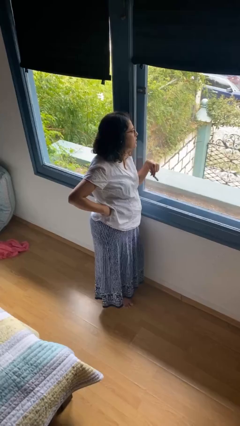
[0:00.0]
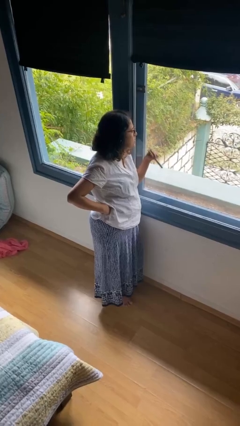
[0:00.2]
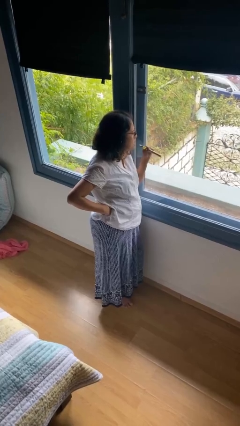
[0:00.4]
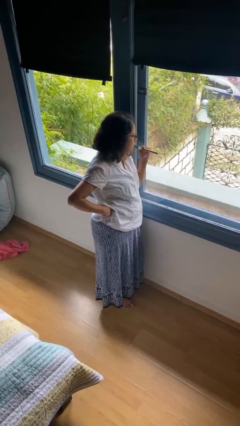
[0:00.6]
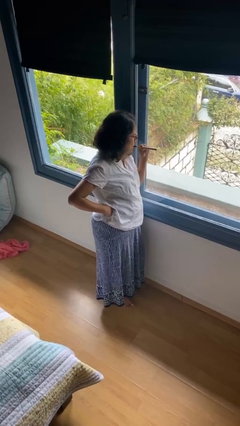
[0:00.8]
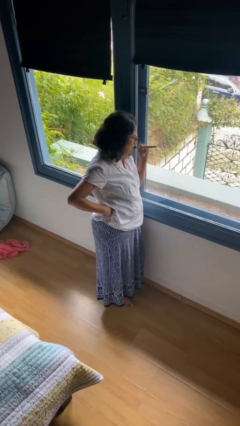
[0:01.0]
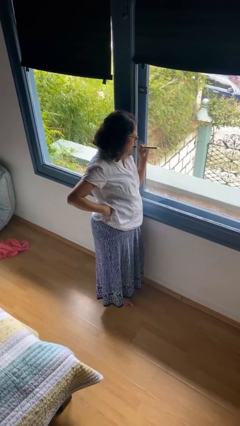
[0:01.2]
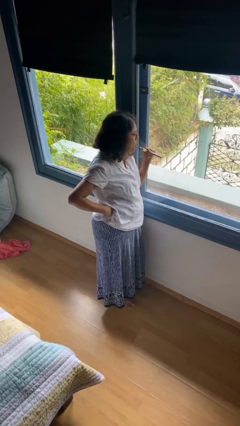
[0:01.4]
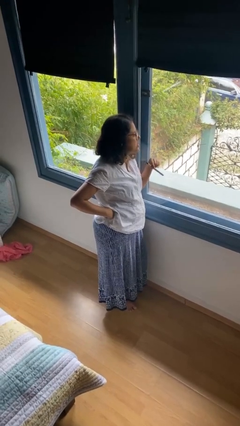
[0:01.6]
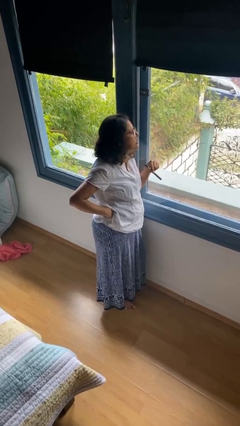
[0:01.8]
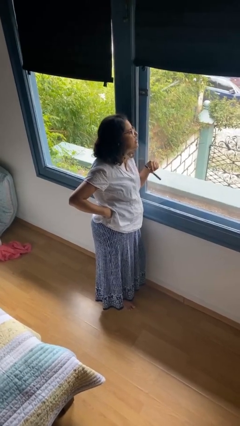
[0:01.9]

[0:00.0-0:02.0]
person vapes

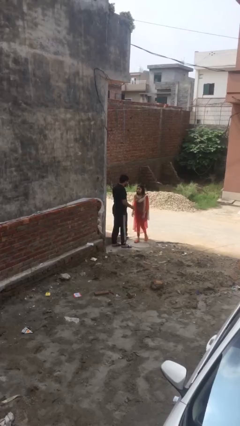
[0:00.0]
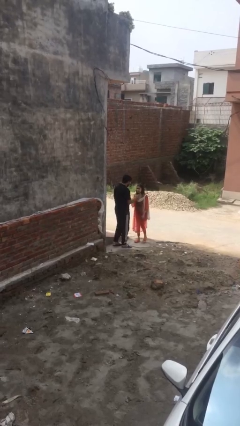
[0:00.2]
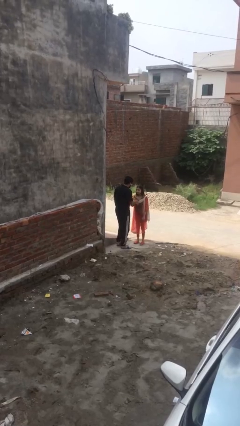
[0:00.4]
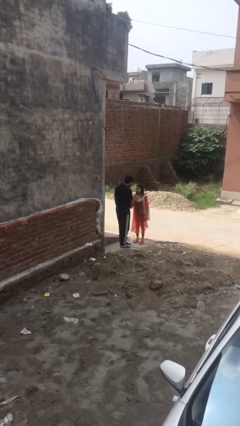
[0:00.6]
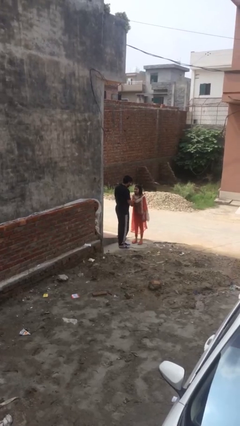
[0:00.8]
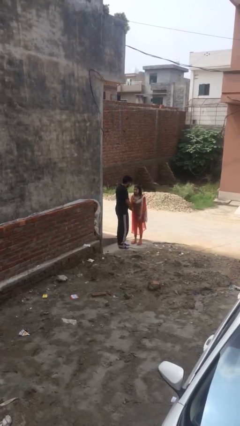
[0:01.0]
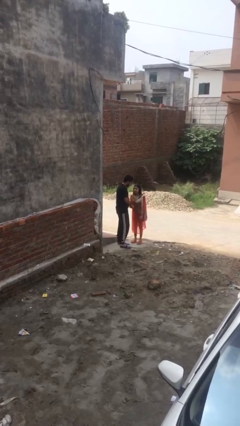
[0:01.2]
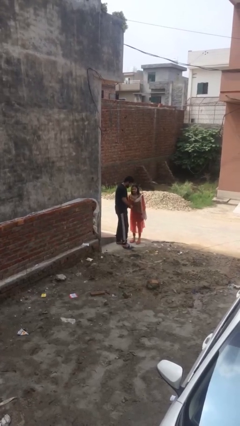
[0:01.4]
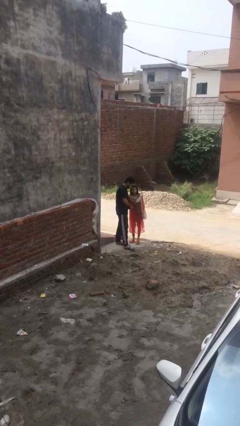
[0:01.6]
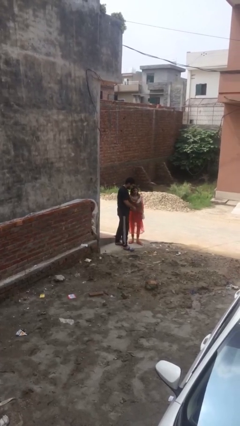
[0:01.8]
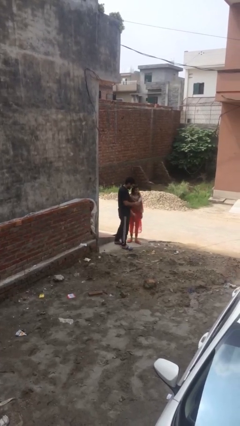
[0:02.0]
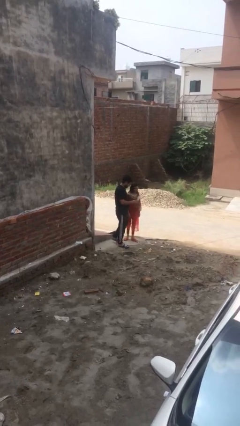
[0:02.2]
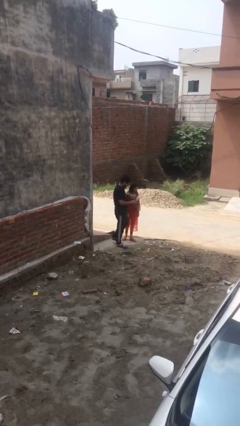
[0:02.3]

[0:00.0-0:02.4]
person shakes hand

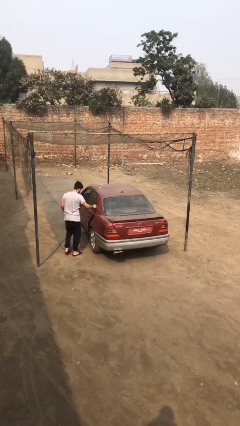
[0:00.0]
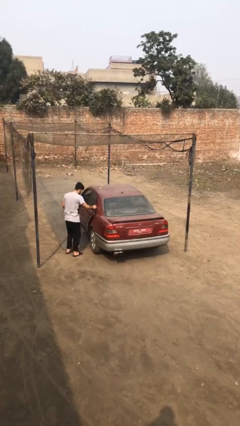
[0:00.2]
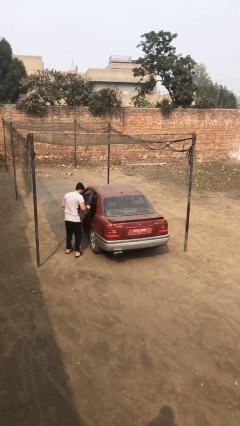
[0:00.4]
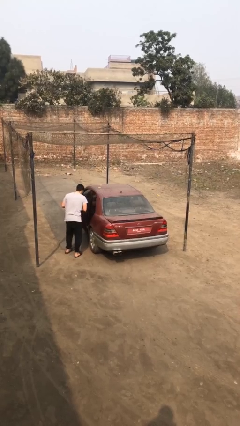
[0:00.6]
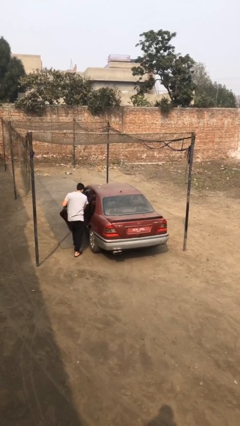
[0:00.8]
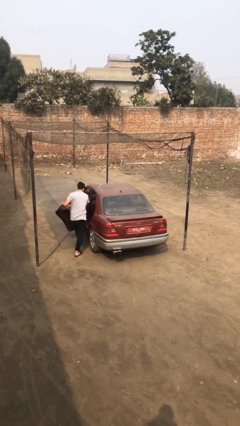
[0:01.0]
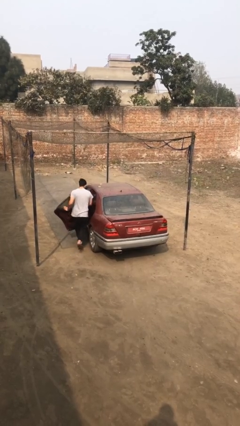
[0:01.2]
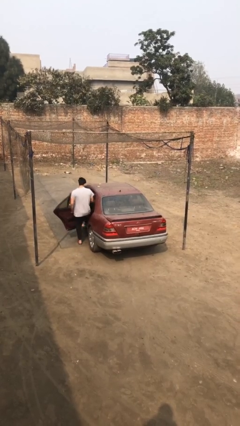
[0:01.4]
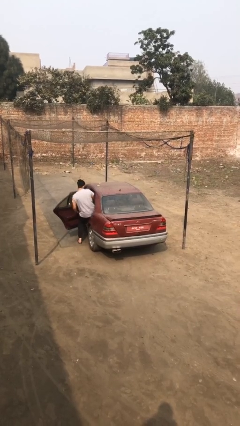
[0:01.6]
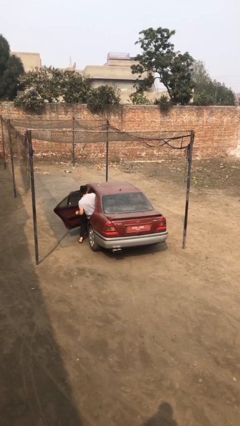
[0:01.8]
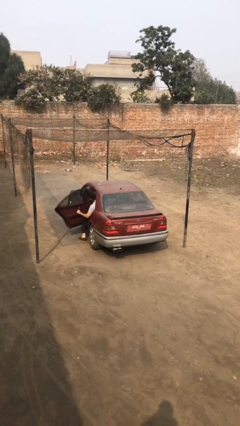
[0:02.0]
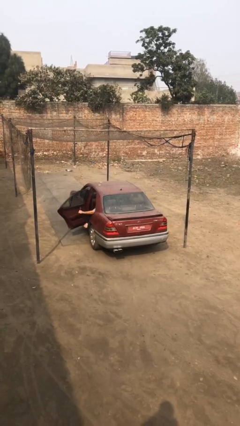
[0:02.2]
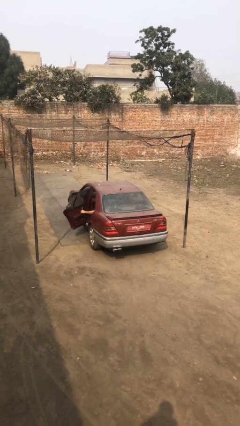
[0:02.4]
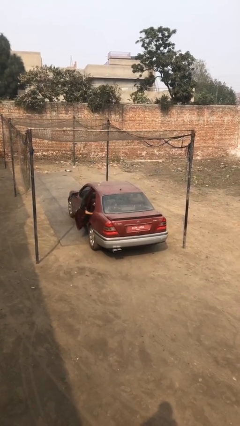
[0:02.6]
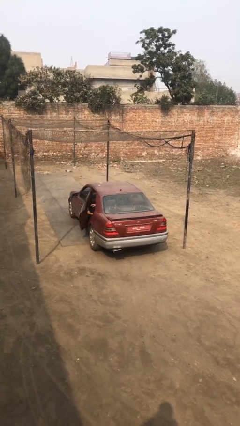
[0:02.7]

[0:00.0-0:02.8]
car picks up person

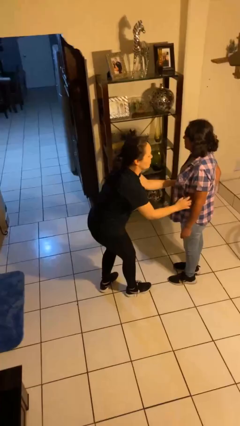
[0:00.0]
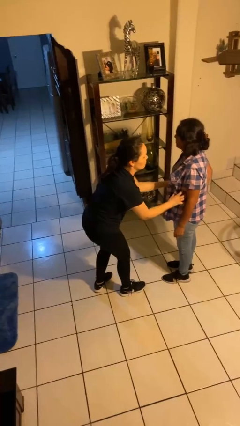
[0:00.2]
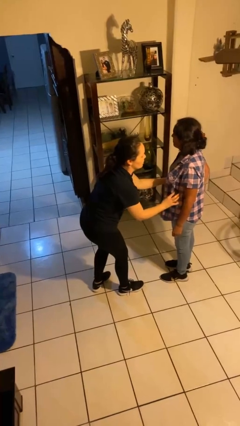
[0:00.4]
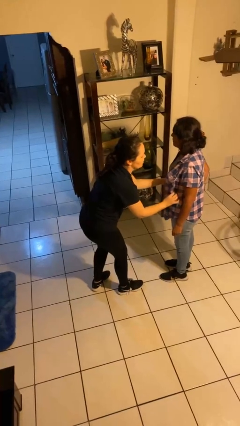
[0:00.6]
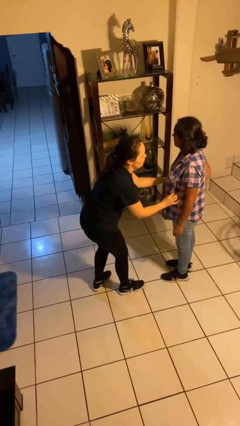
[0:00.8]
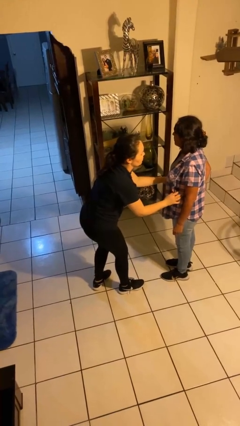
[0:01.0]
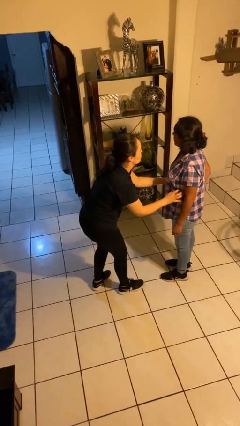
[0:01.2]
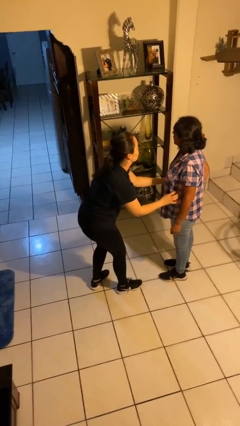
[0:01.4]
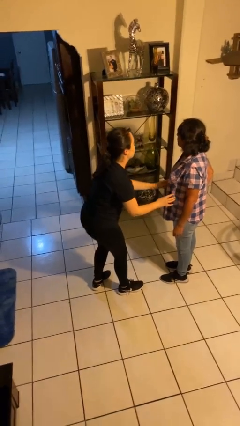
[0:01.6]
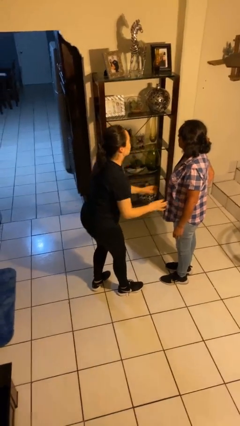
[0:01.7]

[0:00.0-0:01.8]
person tickles person

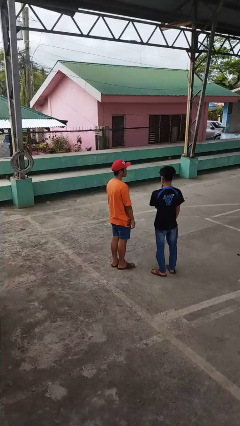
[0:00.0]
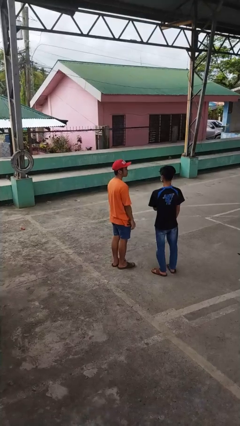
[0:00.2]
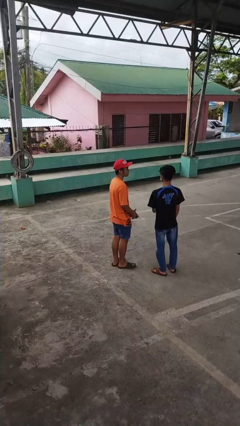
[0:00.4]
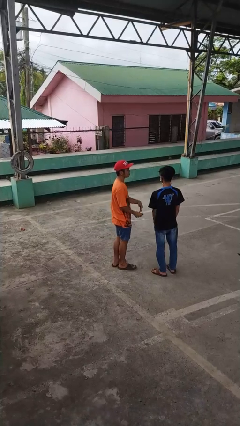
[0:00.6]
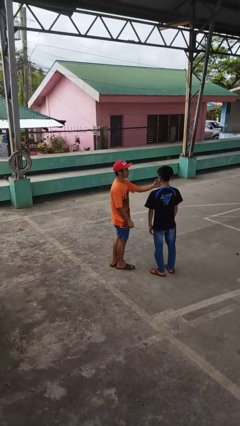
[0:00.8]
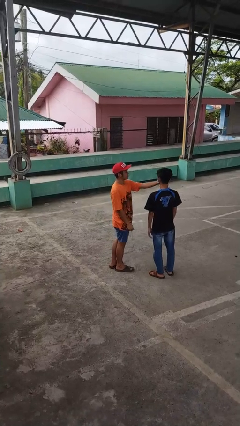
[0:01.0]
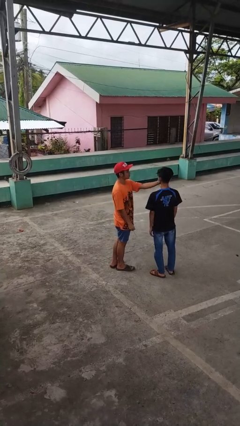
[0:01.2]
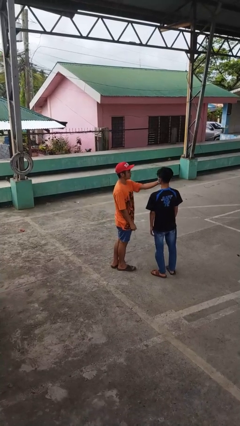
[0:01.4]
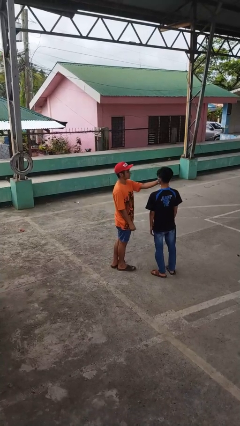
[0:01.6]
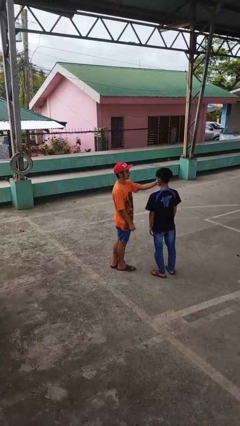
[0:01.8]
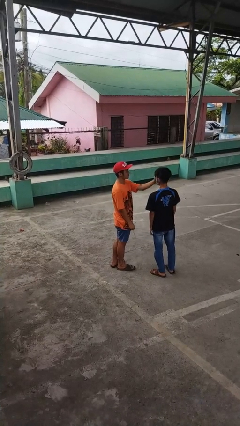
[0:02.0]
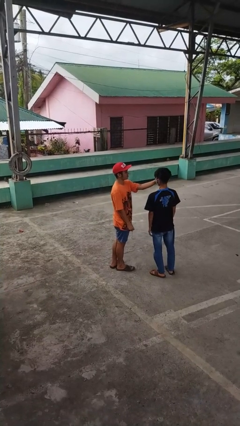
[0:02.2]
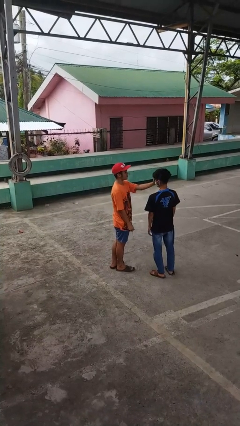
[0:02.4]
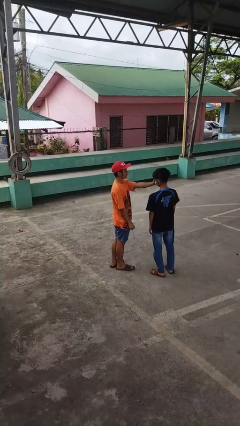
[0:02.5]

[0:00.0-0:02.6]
person touches face of person

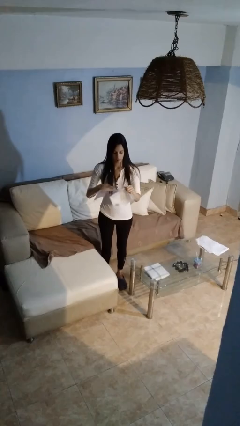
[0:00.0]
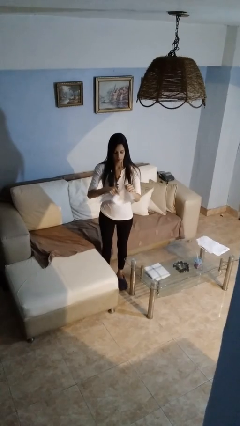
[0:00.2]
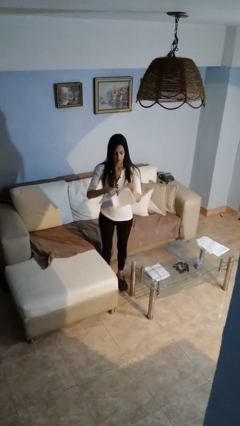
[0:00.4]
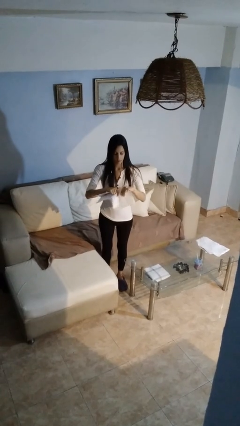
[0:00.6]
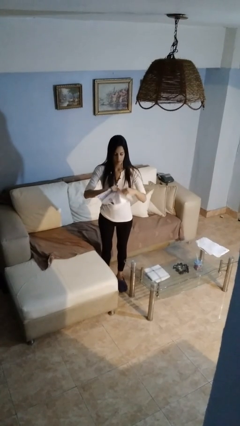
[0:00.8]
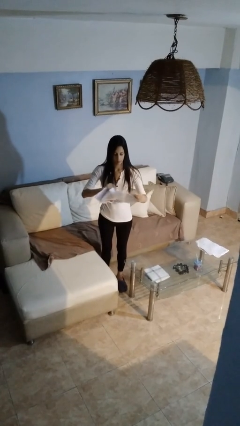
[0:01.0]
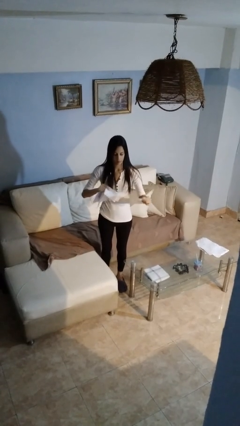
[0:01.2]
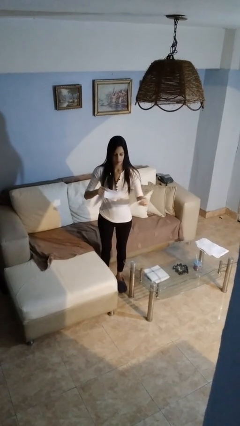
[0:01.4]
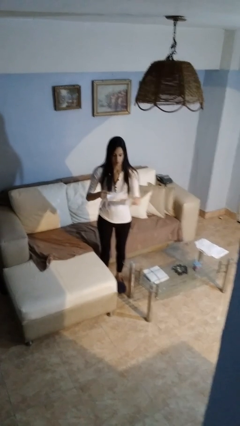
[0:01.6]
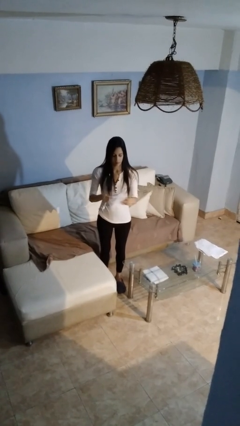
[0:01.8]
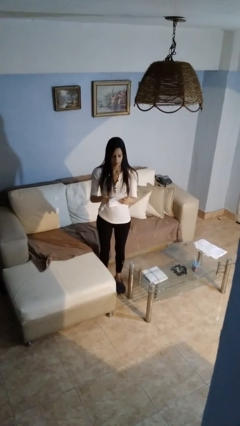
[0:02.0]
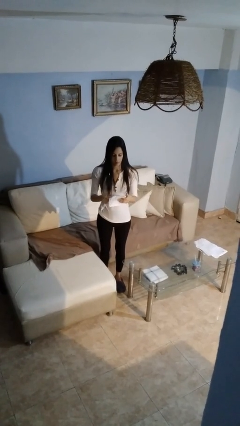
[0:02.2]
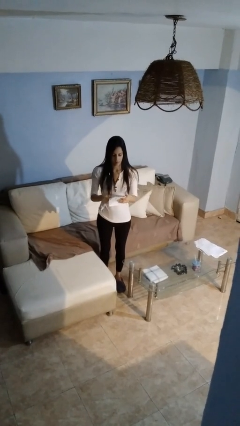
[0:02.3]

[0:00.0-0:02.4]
person tears paper

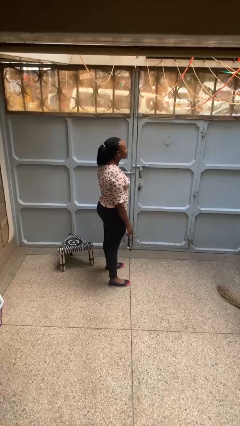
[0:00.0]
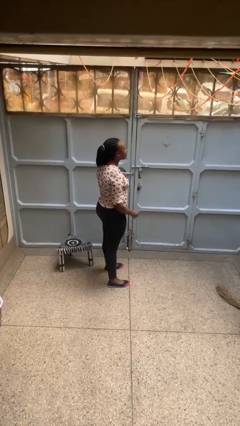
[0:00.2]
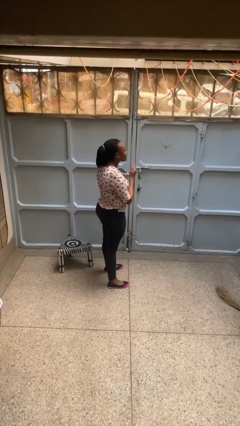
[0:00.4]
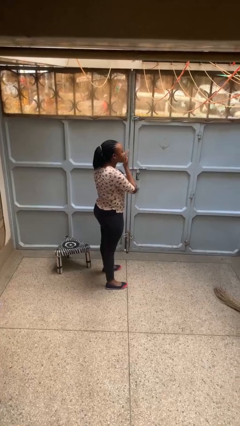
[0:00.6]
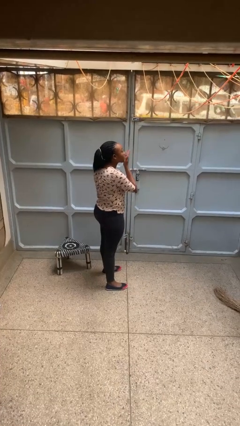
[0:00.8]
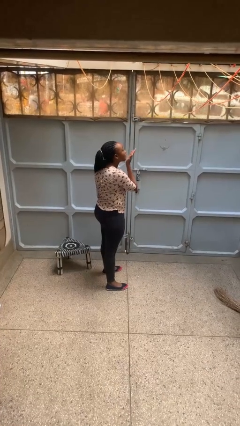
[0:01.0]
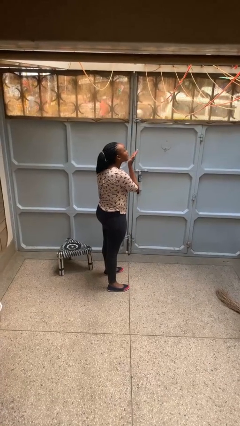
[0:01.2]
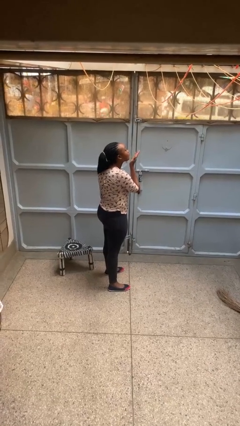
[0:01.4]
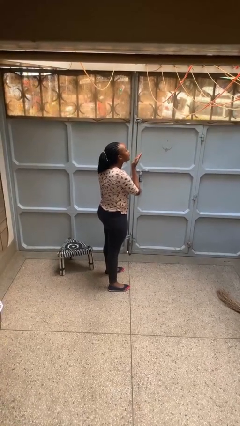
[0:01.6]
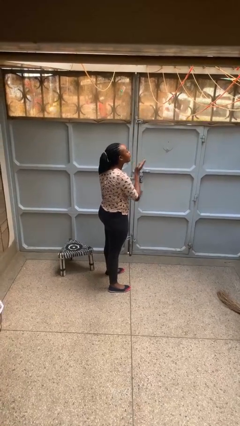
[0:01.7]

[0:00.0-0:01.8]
person gestures blow kiss

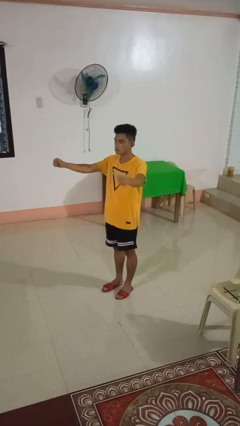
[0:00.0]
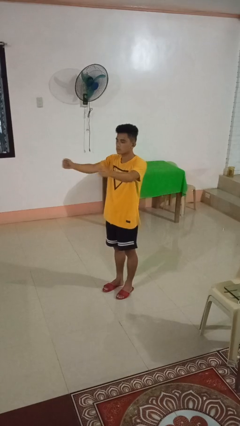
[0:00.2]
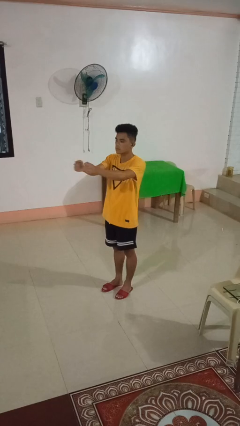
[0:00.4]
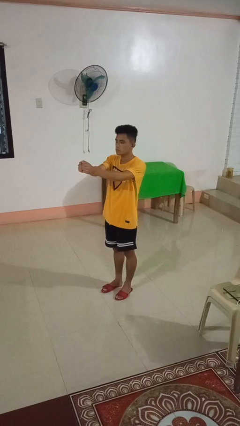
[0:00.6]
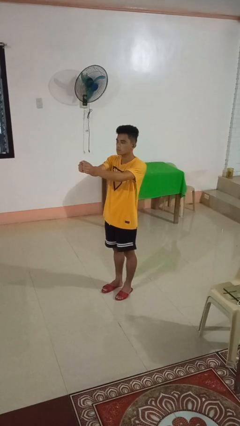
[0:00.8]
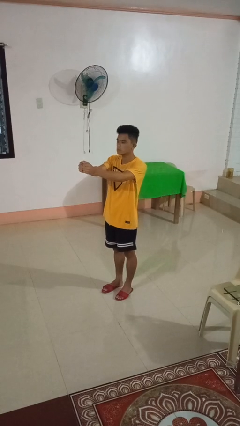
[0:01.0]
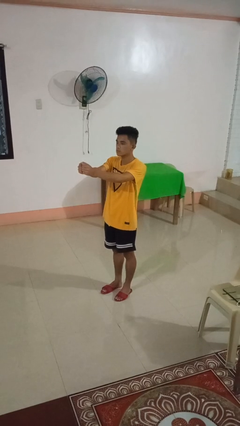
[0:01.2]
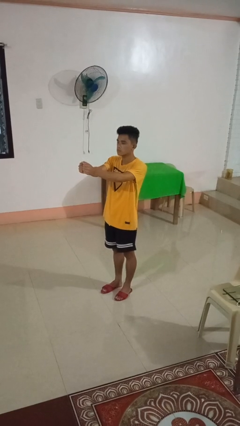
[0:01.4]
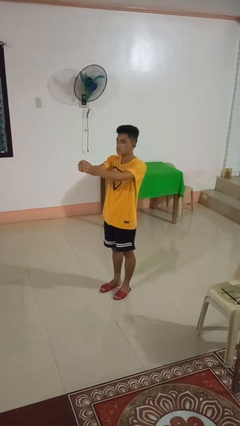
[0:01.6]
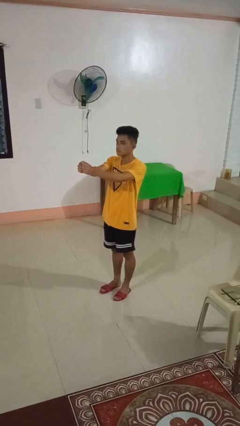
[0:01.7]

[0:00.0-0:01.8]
person gestures zoom in
